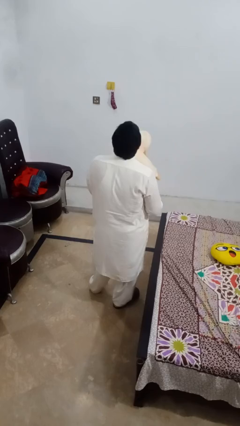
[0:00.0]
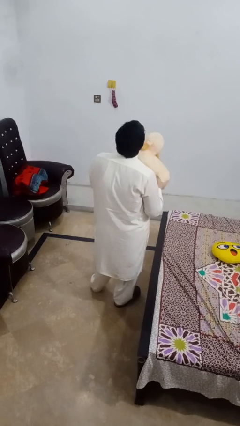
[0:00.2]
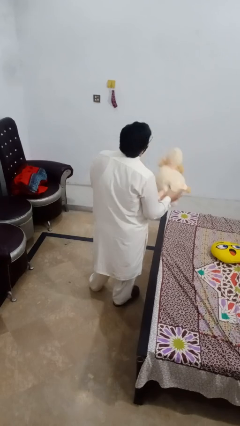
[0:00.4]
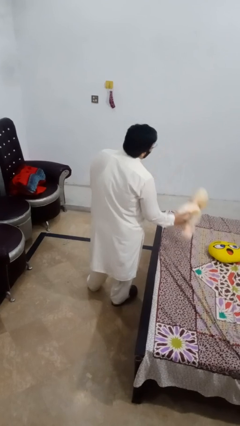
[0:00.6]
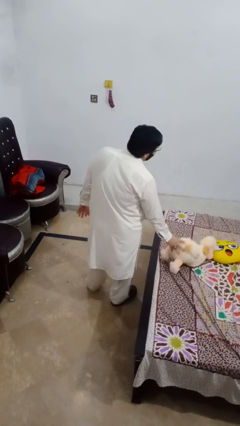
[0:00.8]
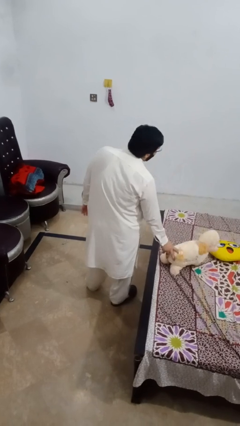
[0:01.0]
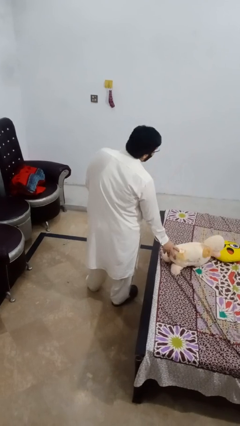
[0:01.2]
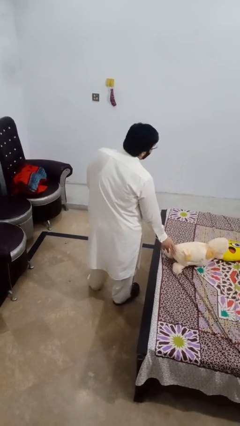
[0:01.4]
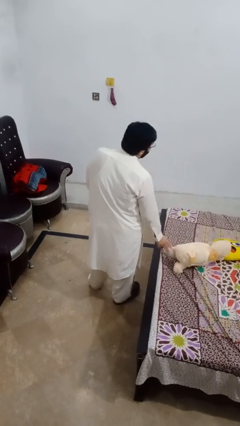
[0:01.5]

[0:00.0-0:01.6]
person puts down object on bed

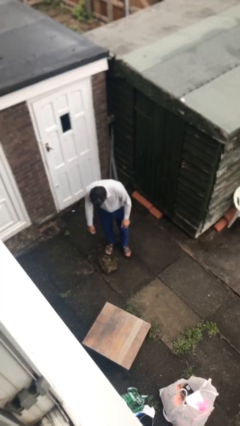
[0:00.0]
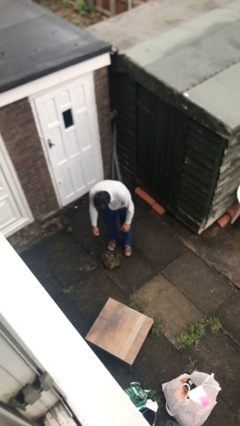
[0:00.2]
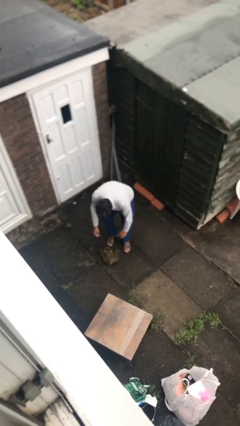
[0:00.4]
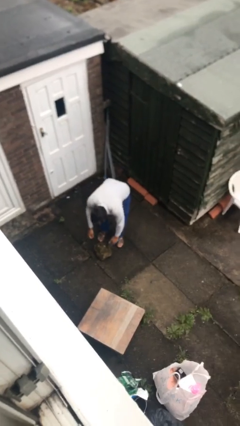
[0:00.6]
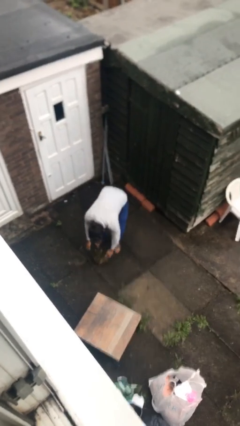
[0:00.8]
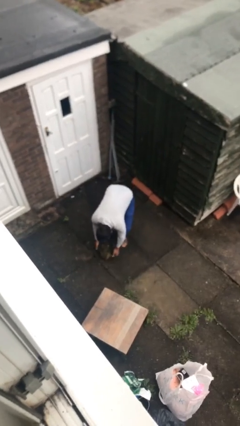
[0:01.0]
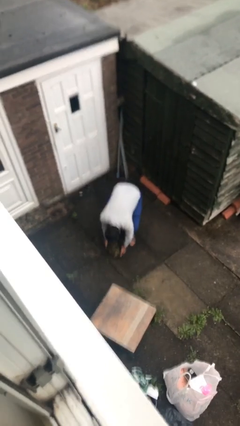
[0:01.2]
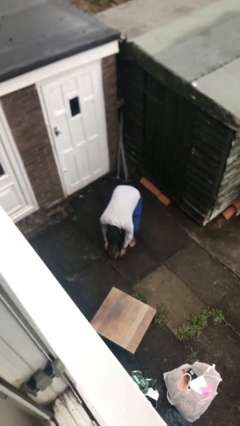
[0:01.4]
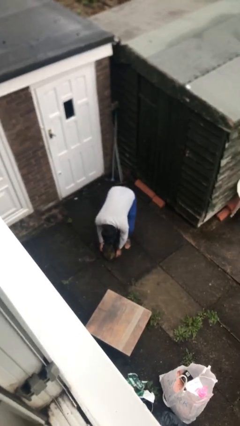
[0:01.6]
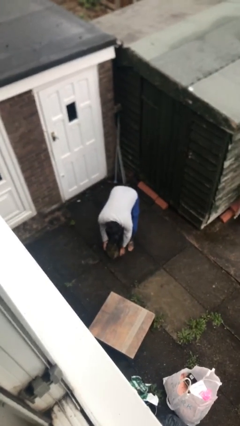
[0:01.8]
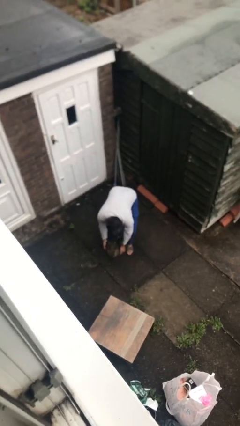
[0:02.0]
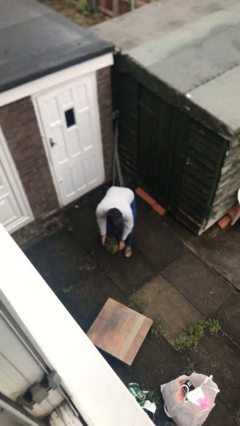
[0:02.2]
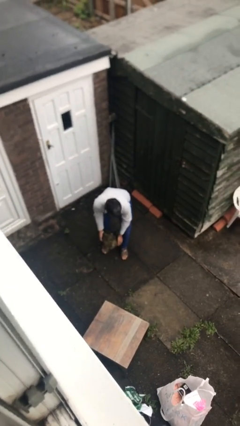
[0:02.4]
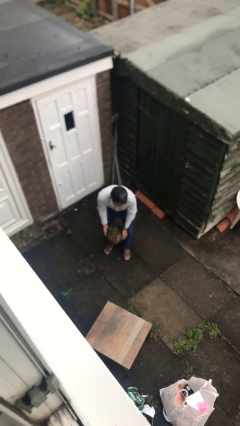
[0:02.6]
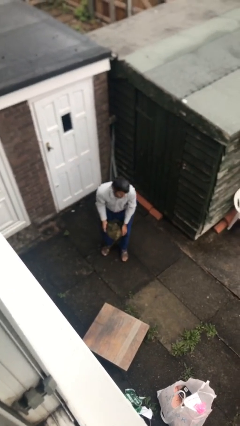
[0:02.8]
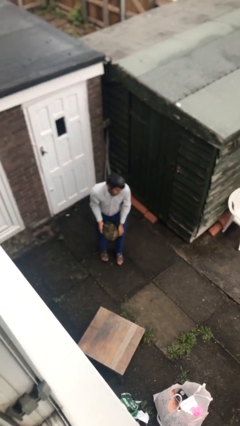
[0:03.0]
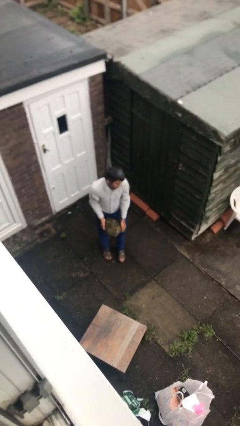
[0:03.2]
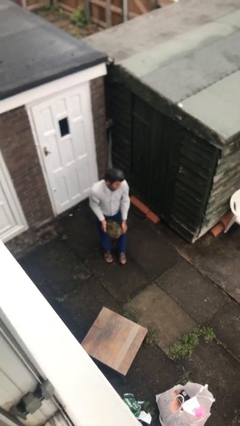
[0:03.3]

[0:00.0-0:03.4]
person picks up object from floor

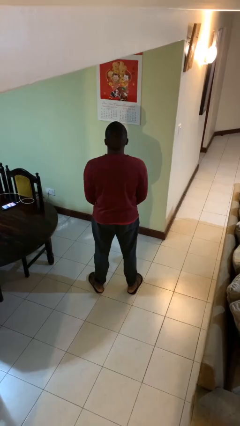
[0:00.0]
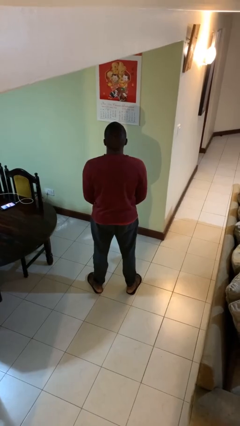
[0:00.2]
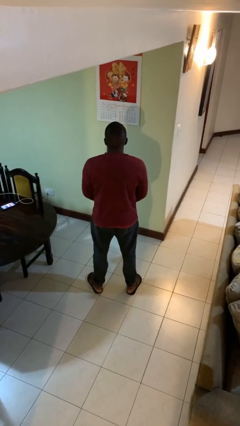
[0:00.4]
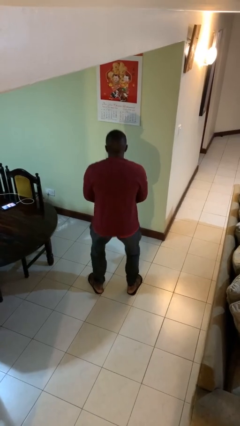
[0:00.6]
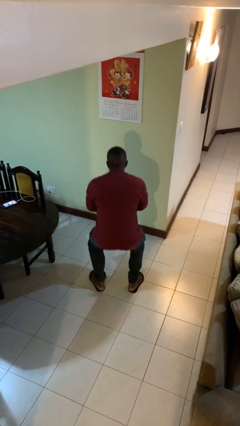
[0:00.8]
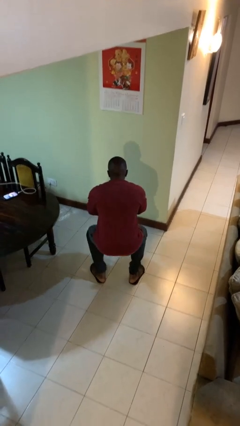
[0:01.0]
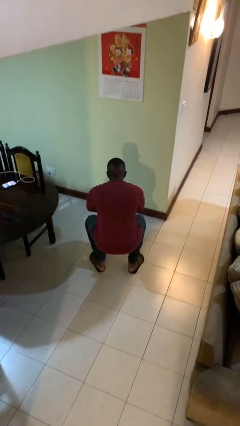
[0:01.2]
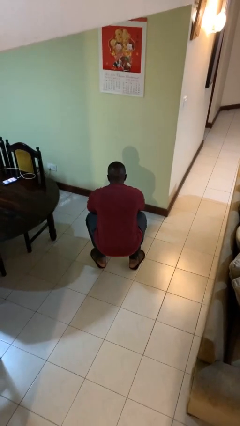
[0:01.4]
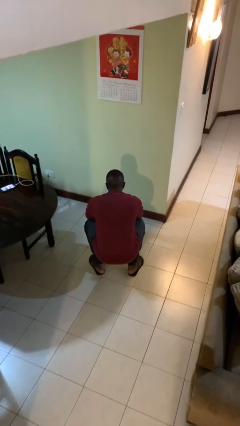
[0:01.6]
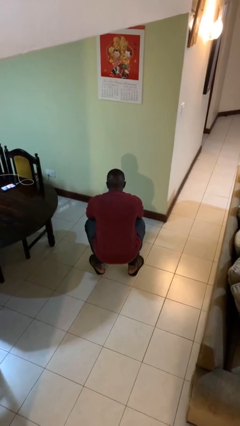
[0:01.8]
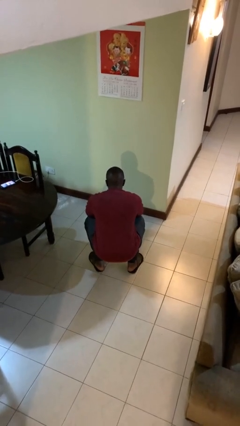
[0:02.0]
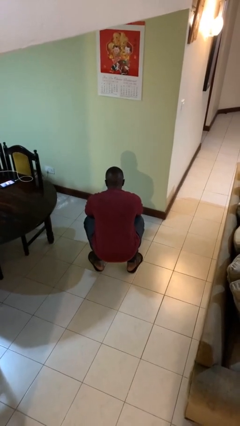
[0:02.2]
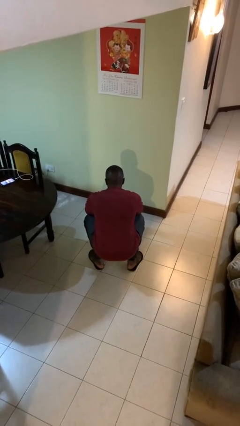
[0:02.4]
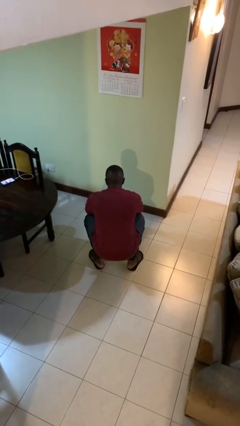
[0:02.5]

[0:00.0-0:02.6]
person squats

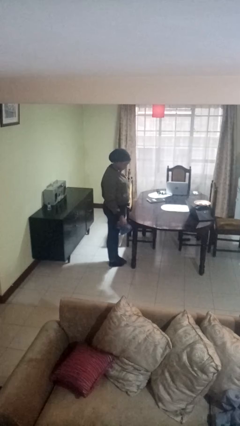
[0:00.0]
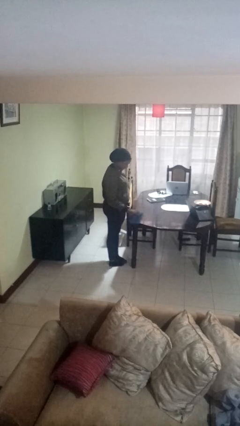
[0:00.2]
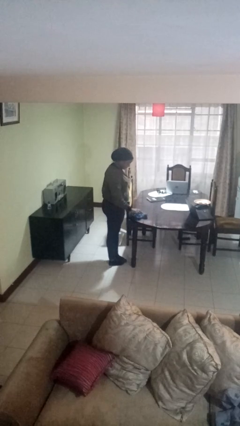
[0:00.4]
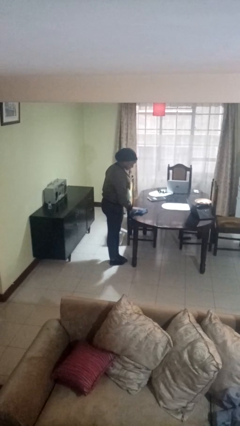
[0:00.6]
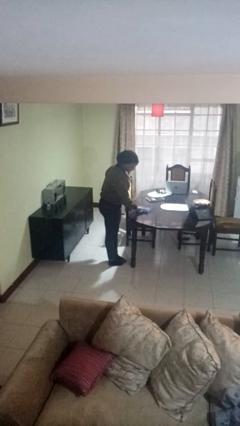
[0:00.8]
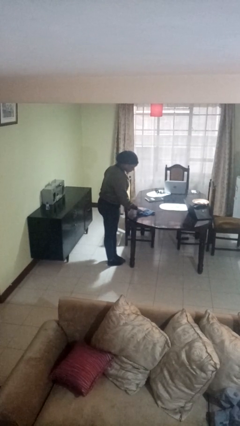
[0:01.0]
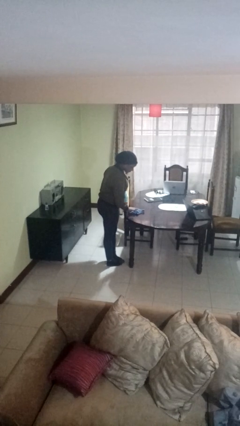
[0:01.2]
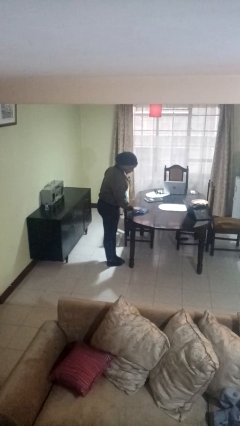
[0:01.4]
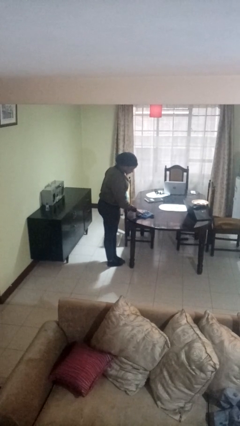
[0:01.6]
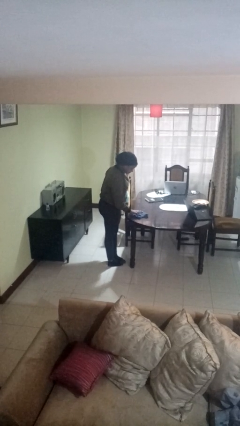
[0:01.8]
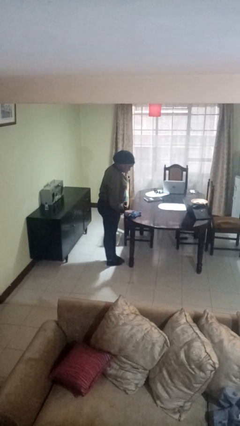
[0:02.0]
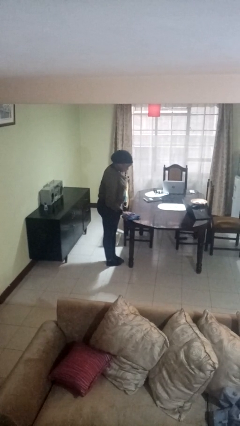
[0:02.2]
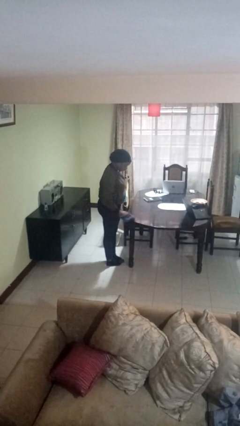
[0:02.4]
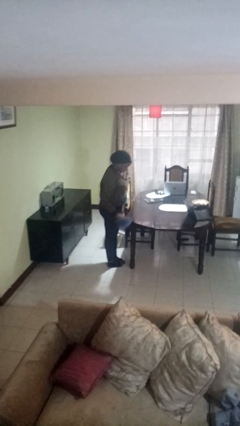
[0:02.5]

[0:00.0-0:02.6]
person cleans table with rag

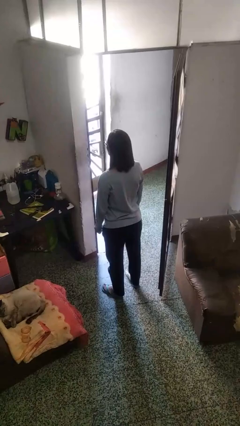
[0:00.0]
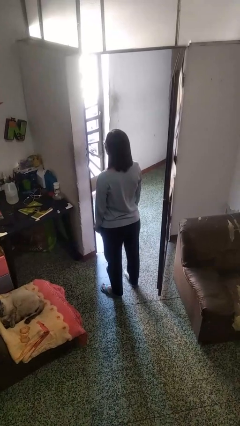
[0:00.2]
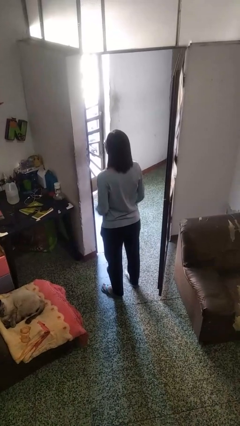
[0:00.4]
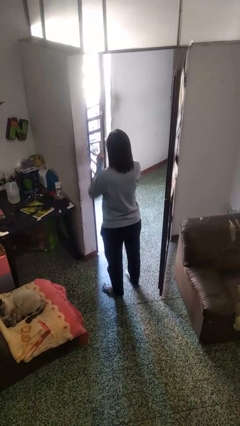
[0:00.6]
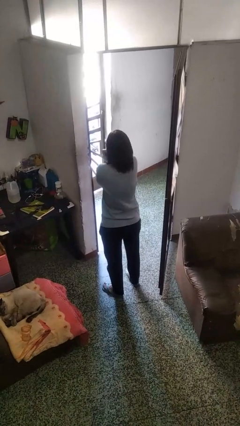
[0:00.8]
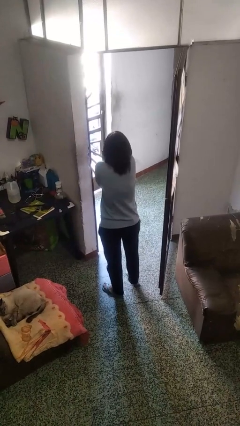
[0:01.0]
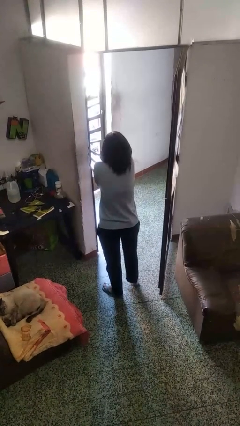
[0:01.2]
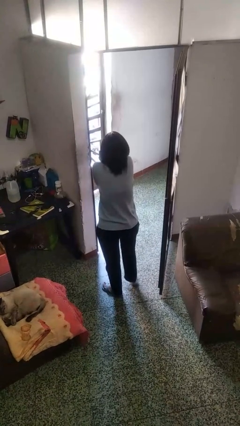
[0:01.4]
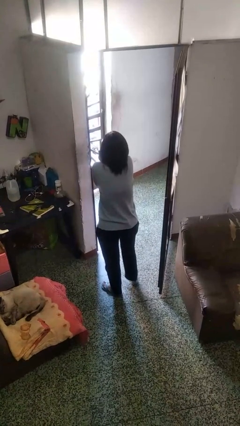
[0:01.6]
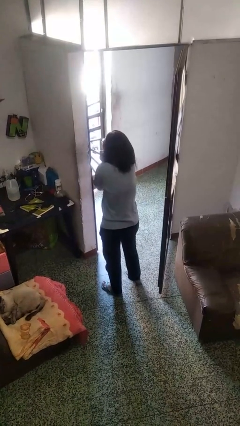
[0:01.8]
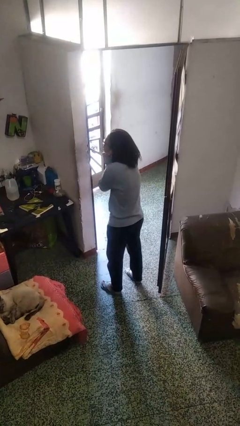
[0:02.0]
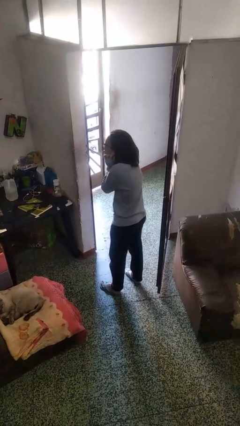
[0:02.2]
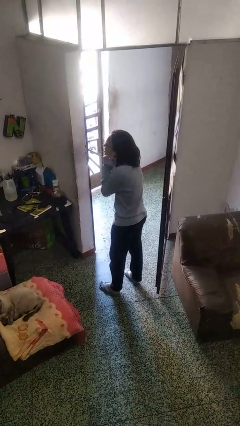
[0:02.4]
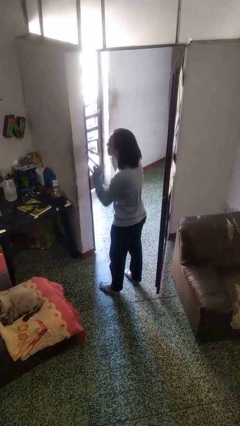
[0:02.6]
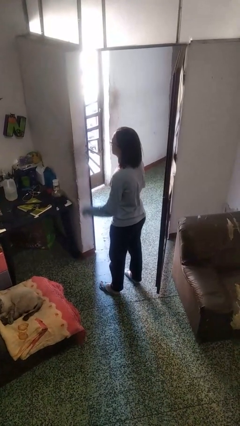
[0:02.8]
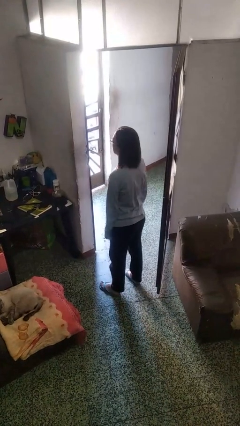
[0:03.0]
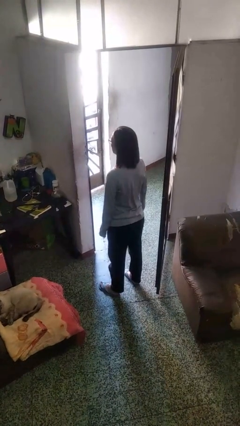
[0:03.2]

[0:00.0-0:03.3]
person puts fingers in ear

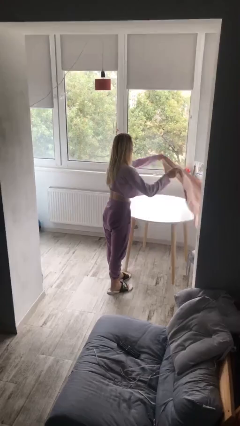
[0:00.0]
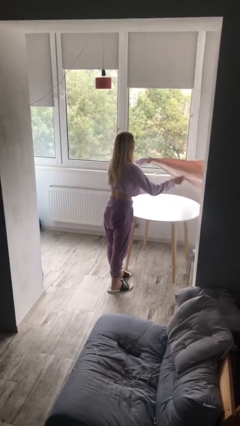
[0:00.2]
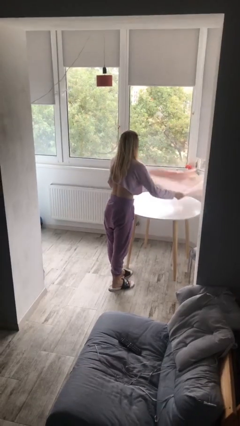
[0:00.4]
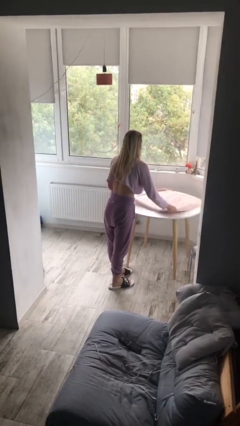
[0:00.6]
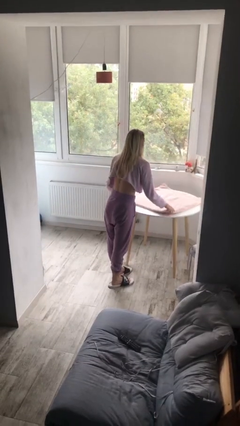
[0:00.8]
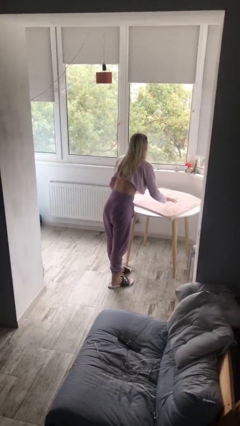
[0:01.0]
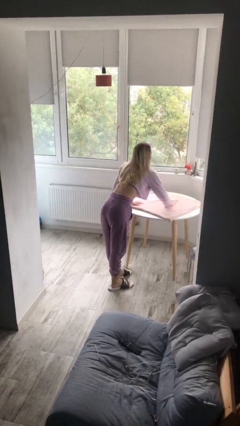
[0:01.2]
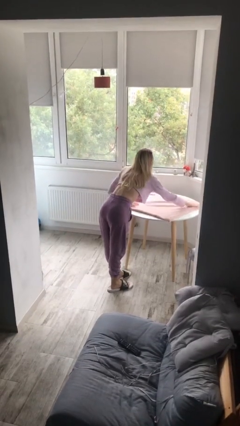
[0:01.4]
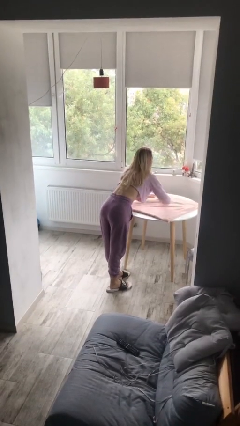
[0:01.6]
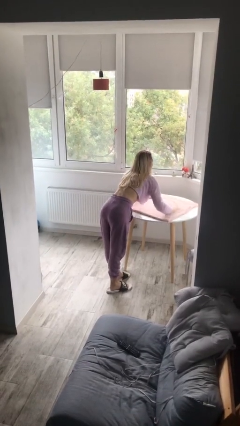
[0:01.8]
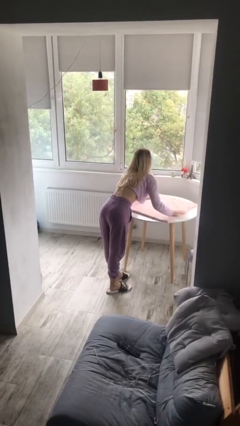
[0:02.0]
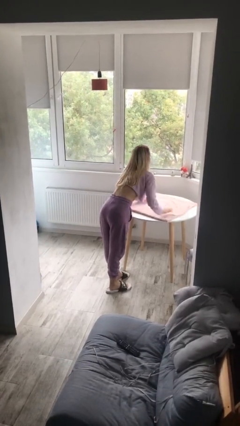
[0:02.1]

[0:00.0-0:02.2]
person spreads tablecloth

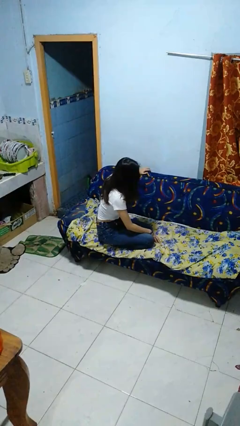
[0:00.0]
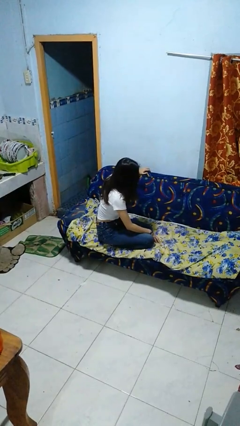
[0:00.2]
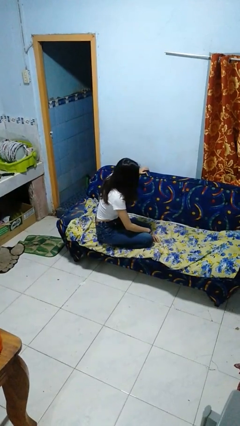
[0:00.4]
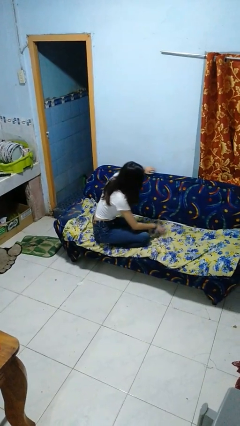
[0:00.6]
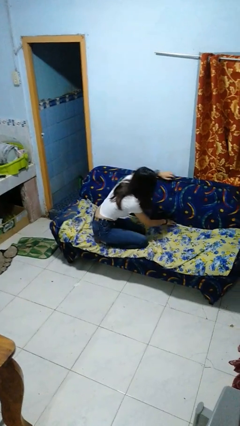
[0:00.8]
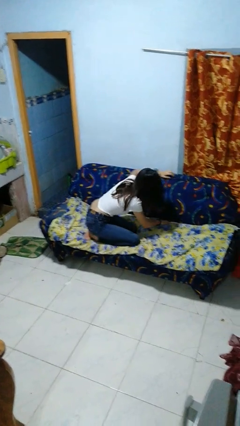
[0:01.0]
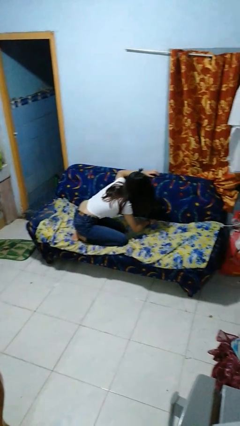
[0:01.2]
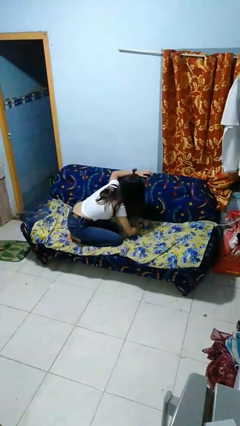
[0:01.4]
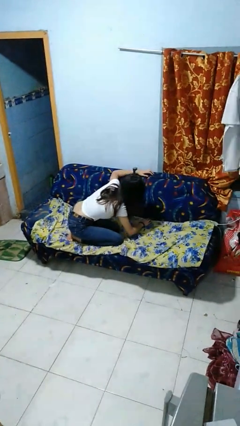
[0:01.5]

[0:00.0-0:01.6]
person searches in couch
